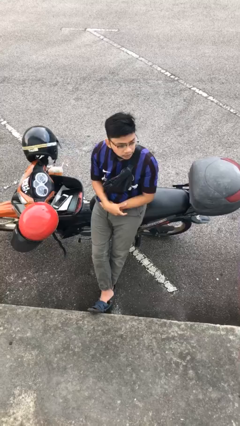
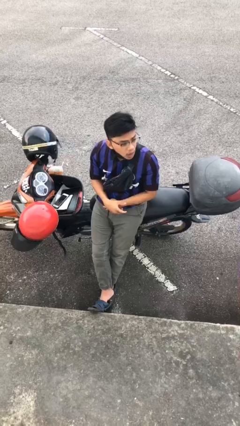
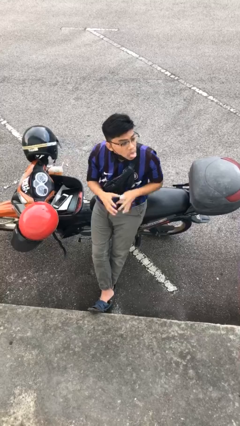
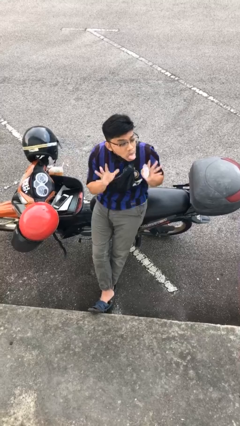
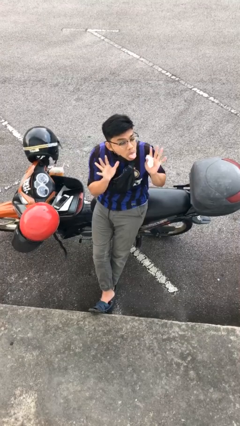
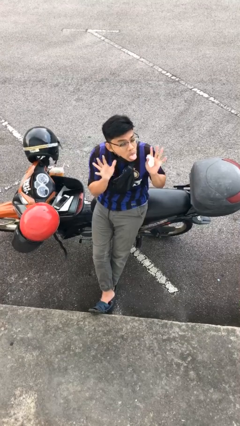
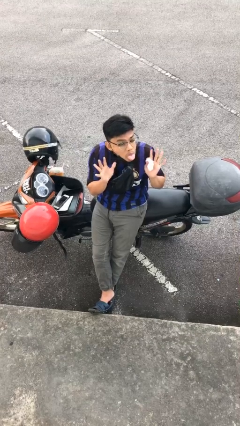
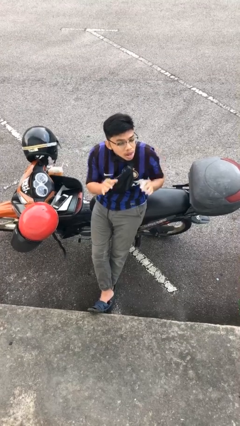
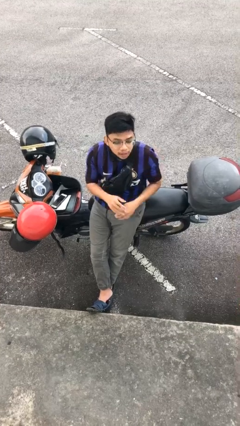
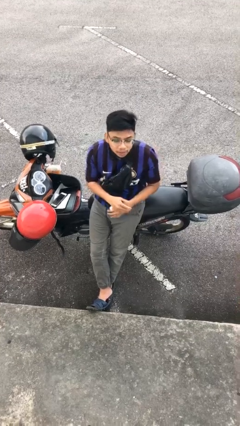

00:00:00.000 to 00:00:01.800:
person sticks out tongue

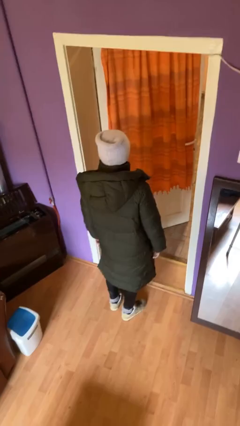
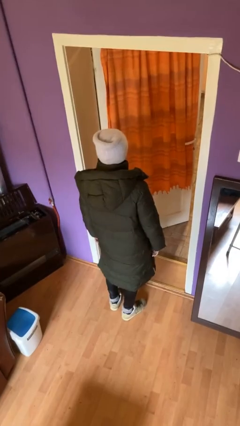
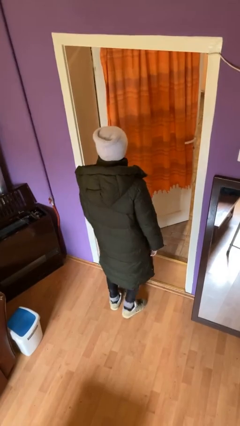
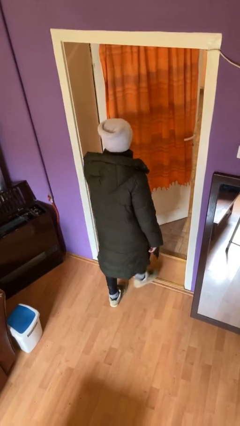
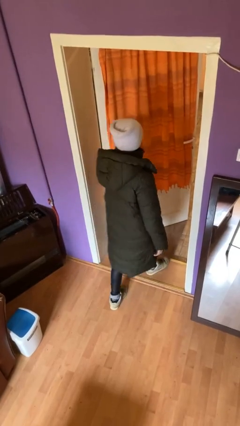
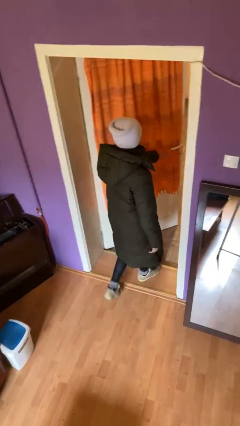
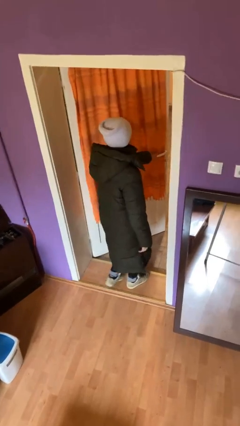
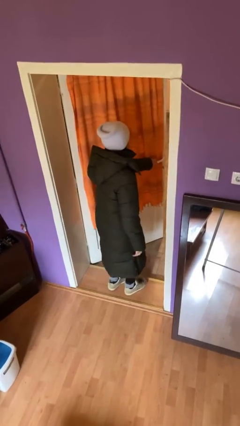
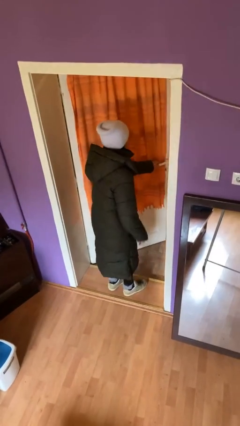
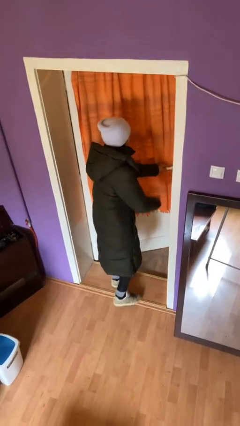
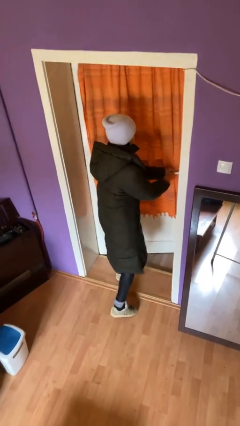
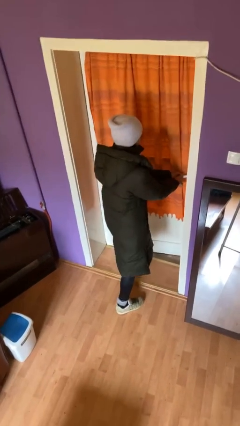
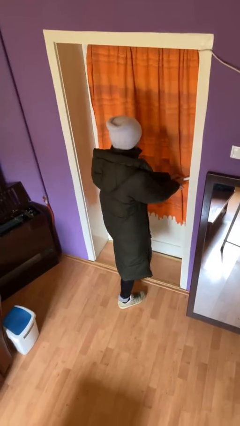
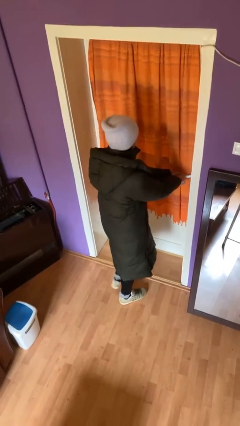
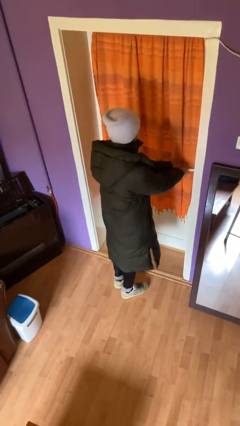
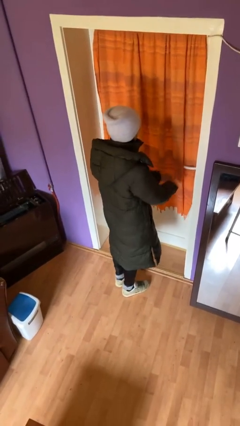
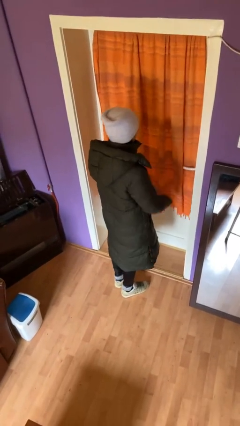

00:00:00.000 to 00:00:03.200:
person closes facility door

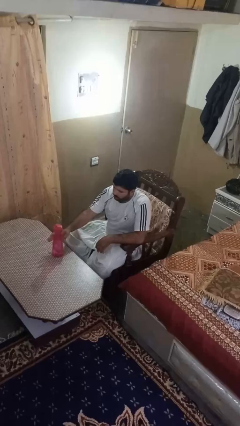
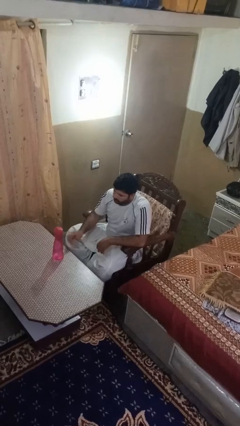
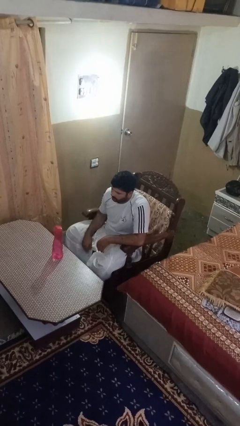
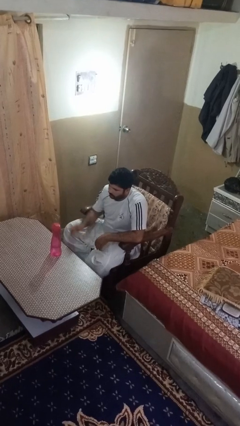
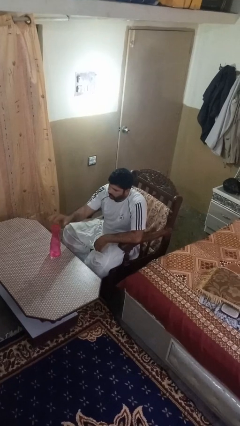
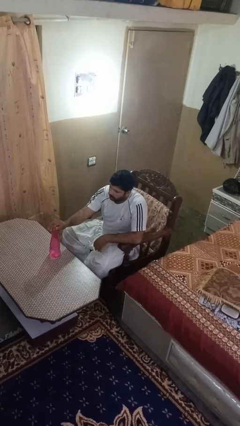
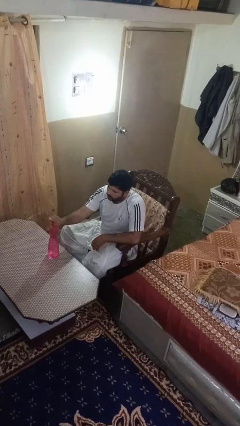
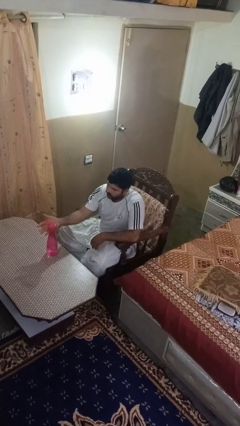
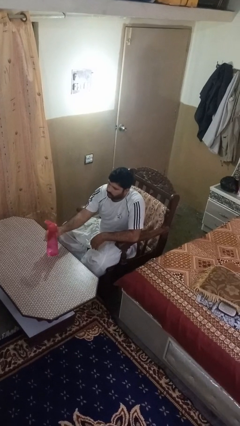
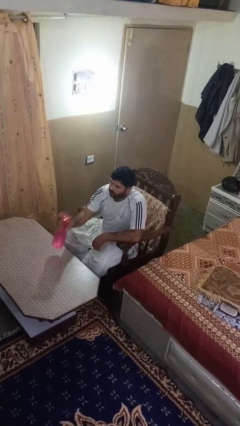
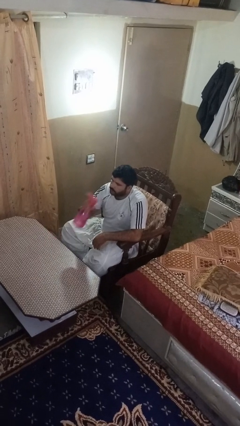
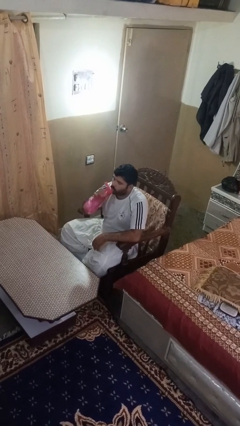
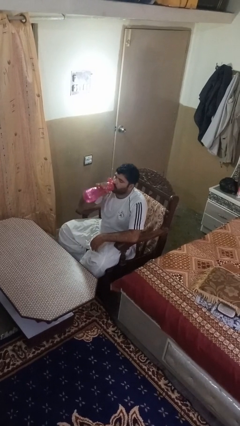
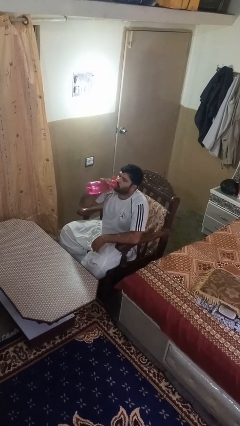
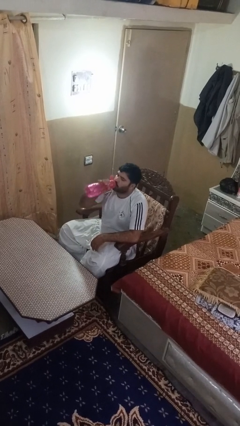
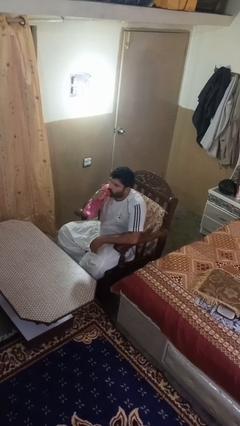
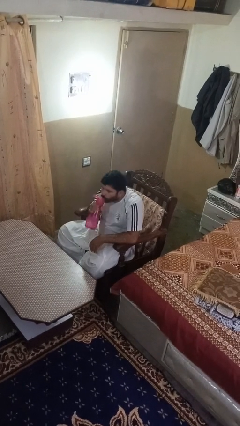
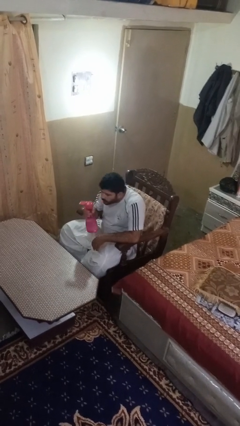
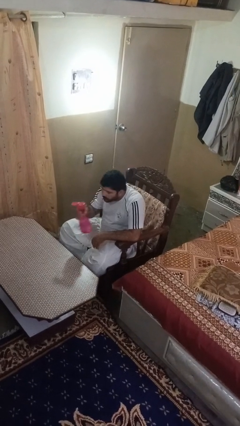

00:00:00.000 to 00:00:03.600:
person drinks from bottle

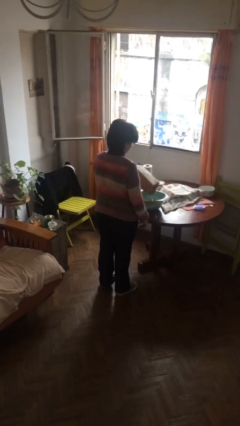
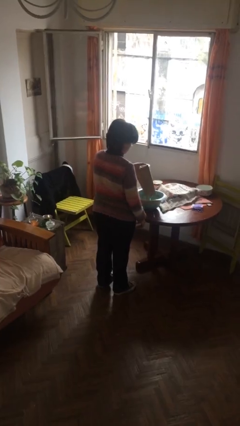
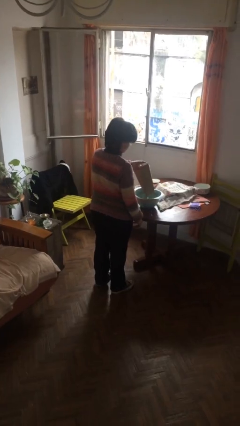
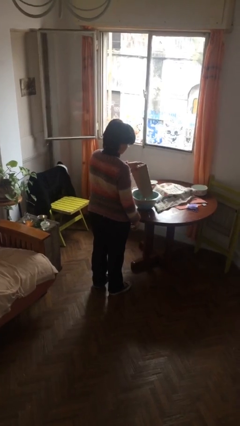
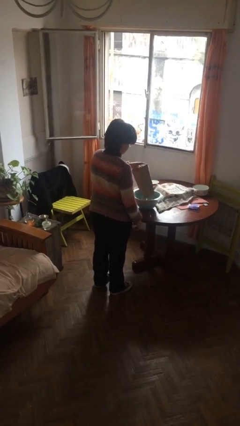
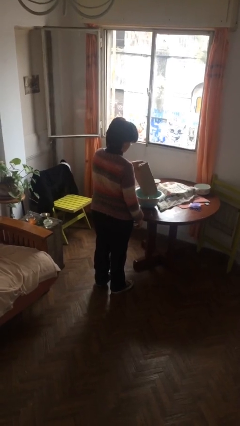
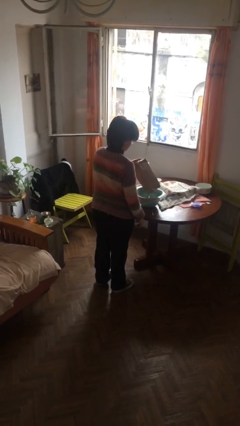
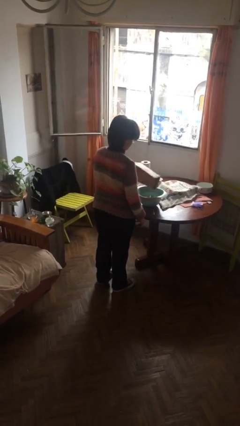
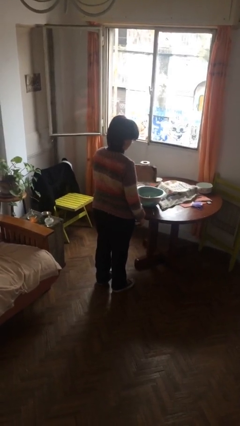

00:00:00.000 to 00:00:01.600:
person pours into bowl

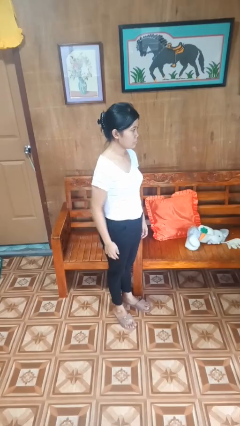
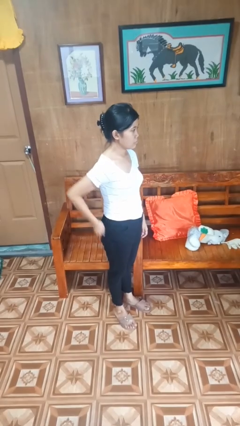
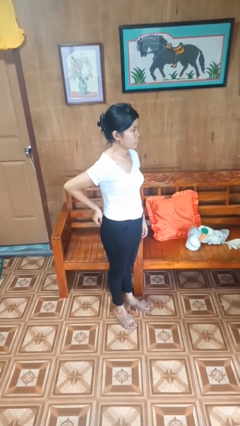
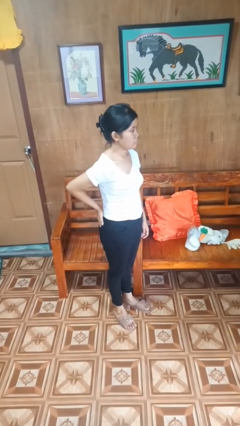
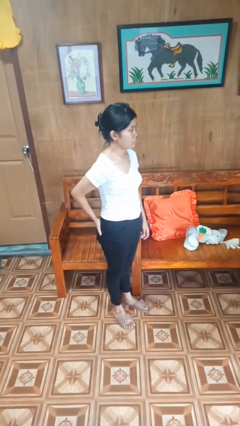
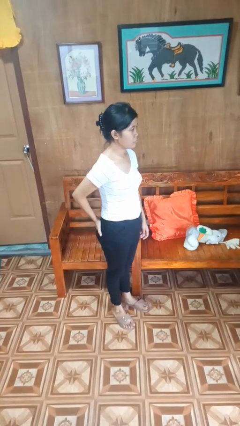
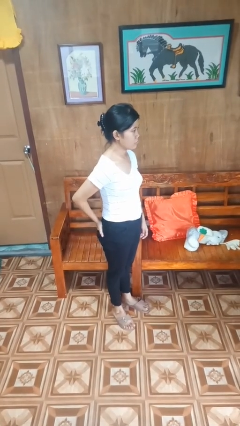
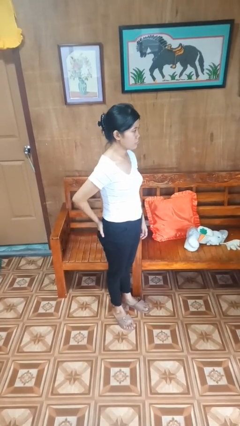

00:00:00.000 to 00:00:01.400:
person puts hands in back pockets

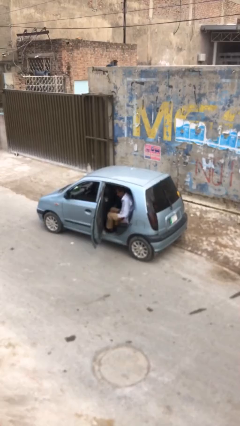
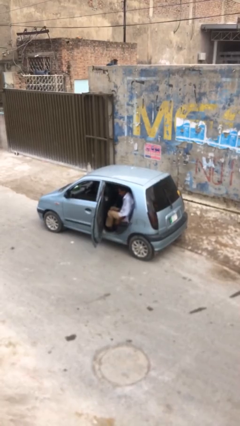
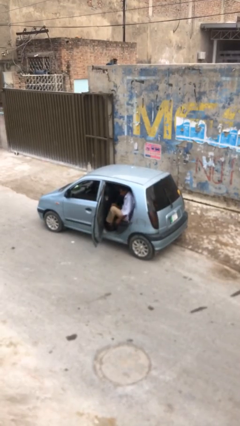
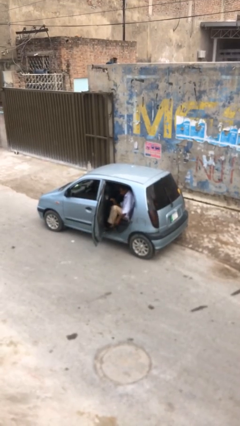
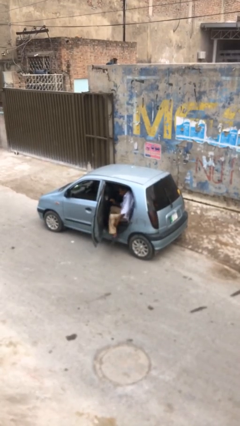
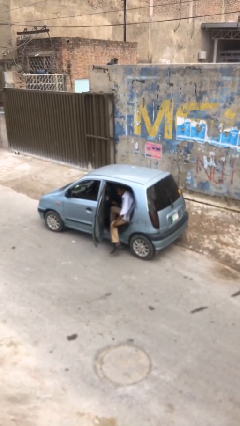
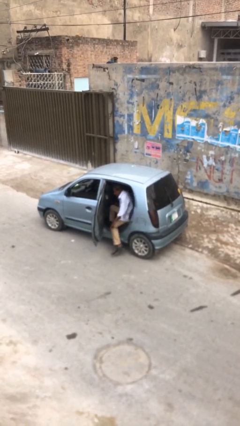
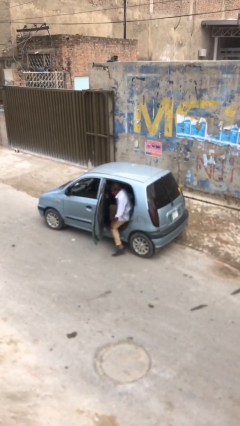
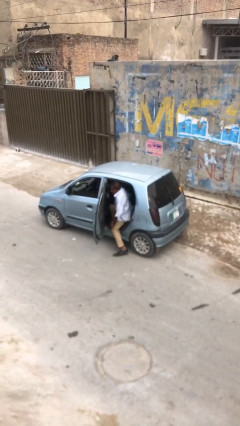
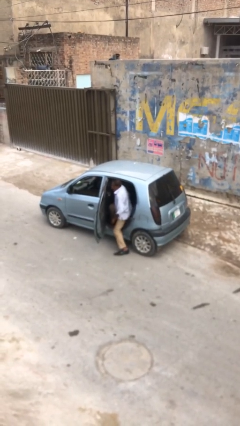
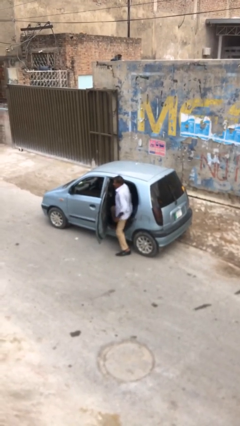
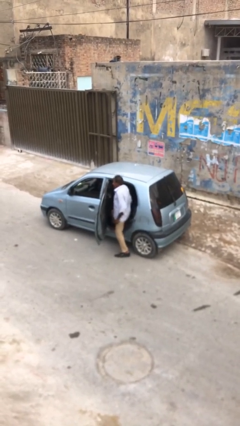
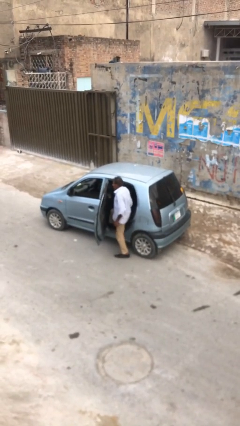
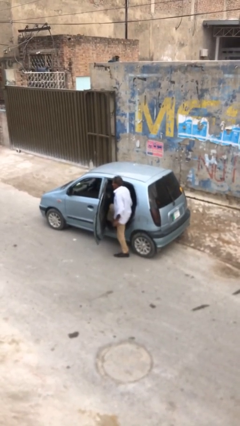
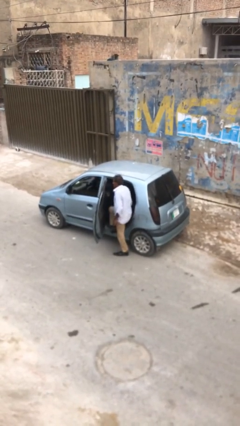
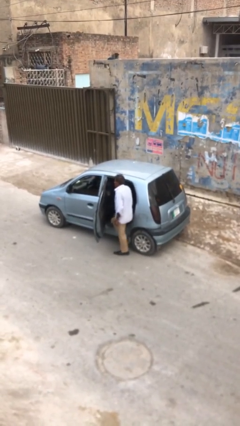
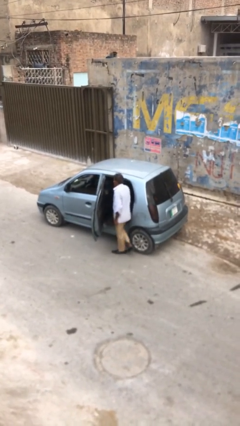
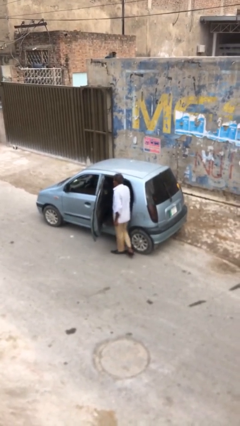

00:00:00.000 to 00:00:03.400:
person exits car

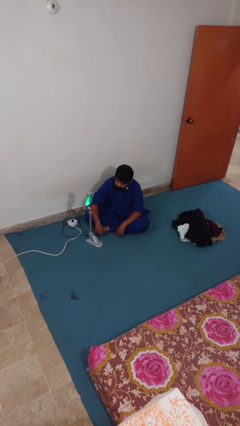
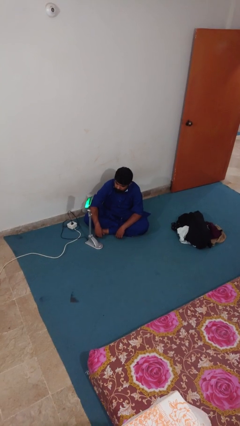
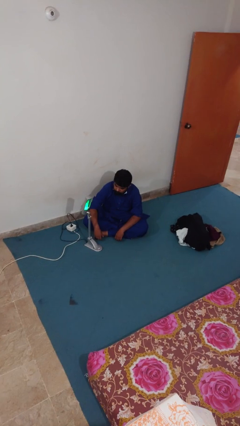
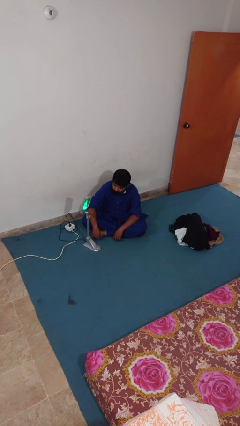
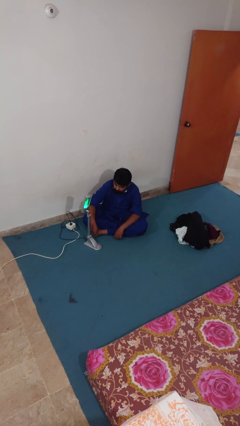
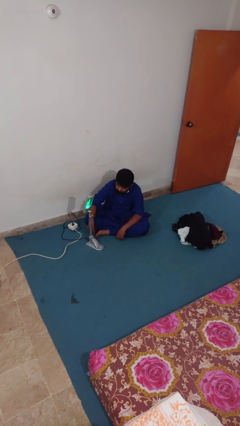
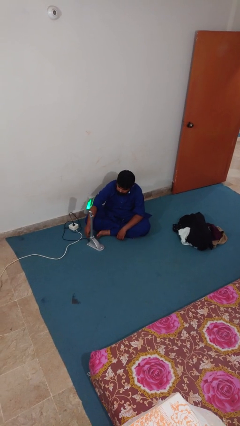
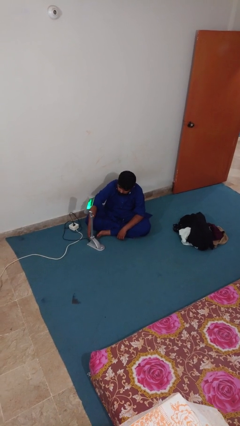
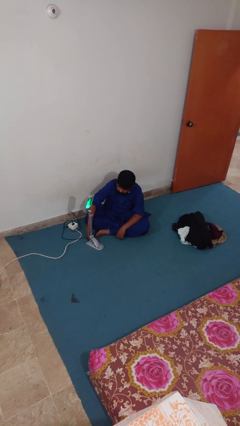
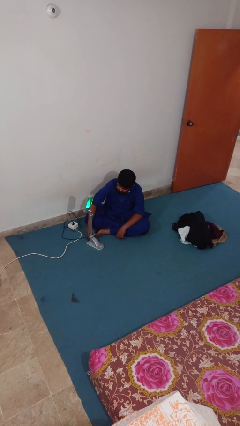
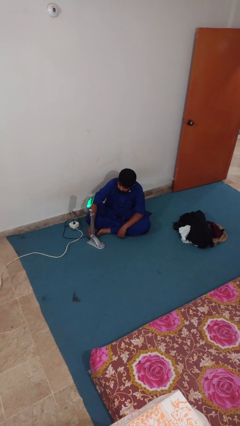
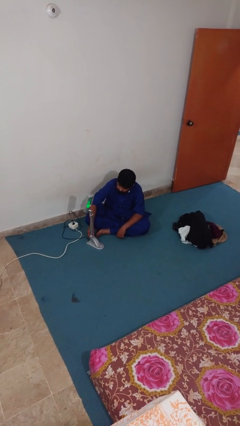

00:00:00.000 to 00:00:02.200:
person turns off lamp
